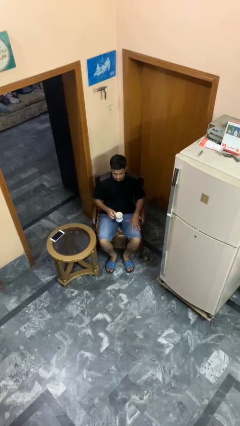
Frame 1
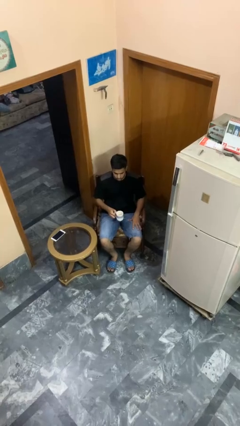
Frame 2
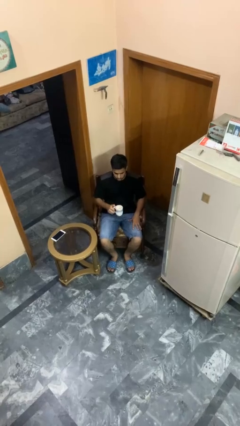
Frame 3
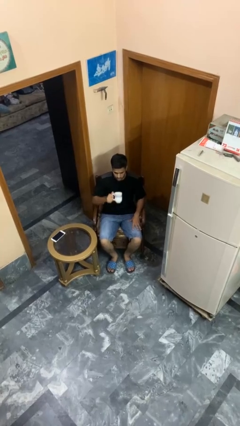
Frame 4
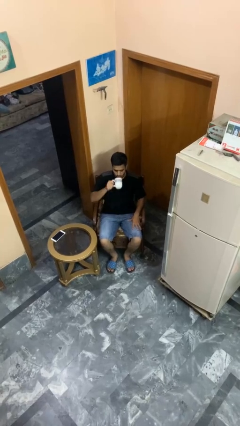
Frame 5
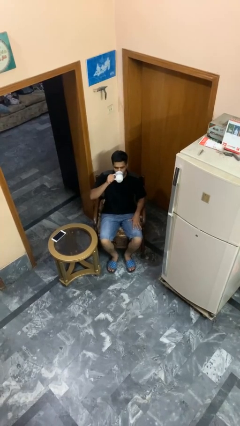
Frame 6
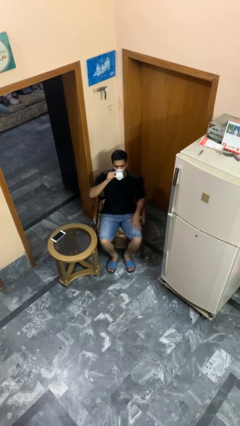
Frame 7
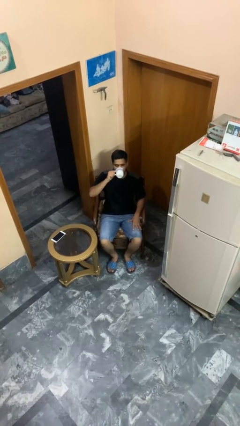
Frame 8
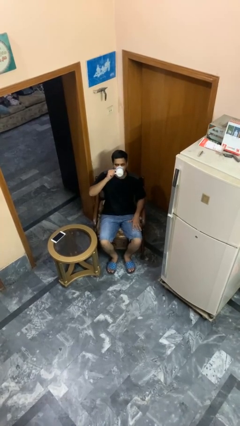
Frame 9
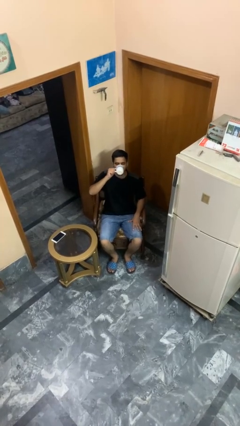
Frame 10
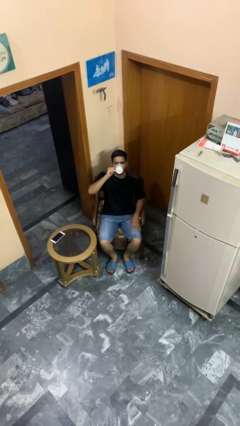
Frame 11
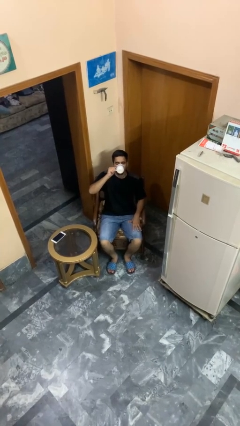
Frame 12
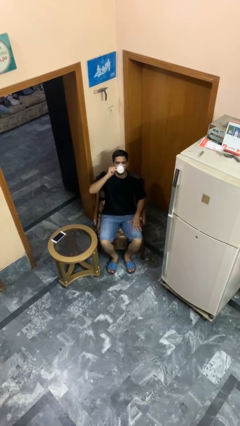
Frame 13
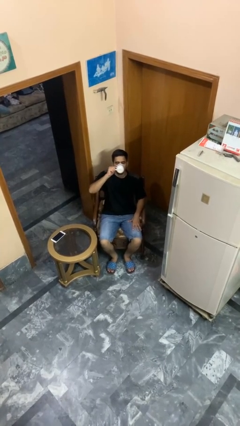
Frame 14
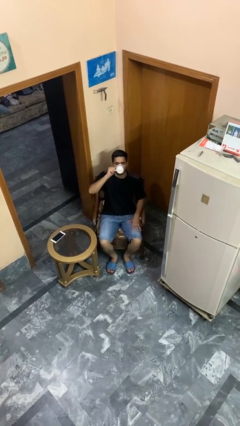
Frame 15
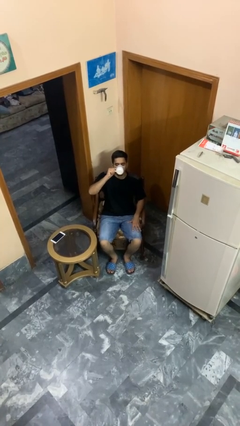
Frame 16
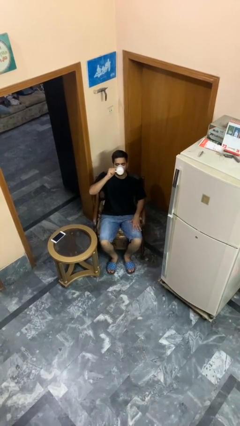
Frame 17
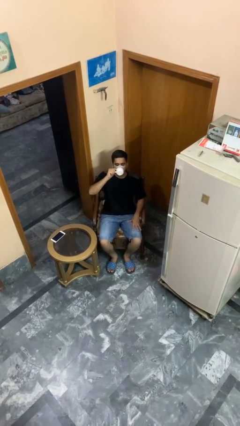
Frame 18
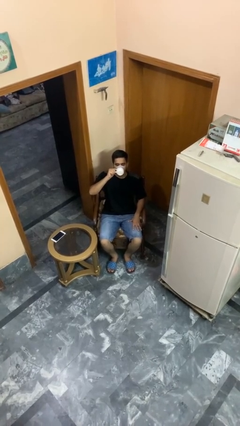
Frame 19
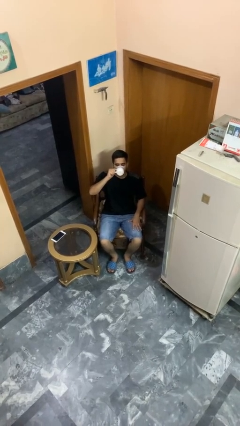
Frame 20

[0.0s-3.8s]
person drinks from mug

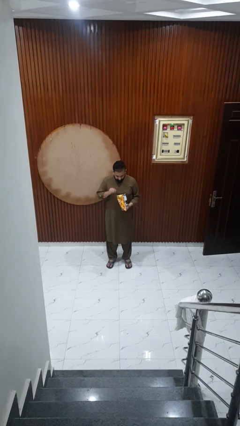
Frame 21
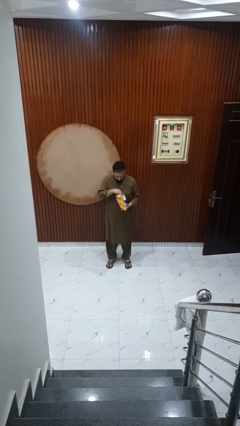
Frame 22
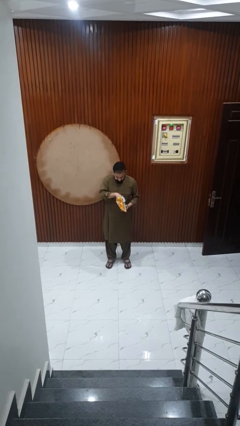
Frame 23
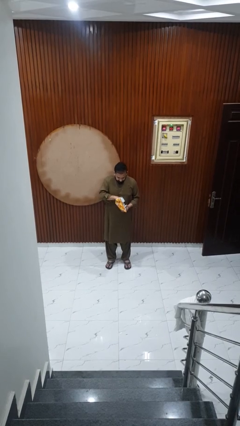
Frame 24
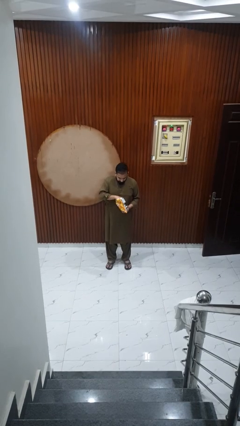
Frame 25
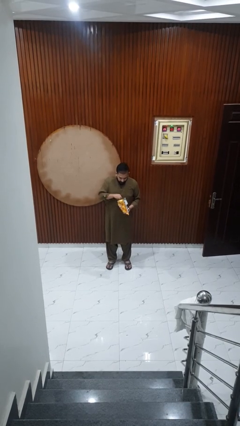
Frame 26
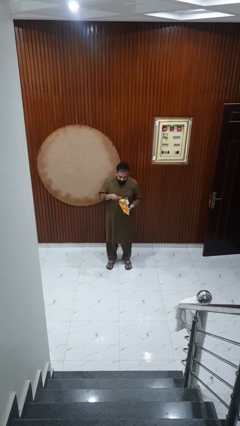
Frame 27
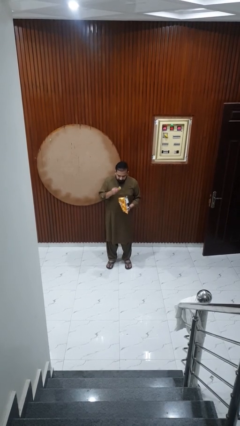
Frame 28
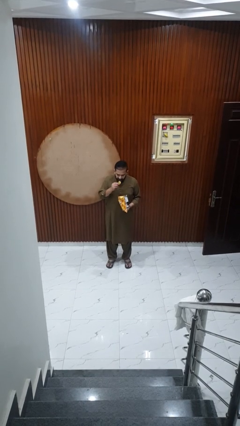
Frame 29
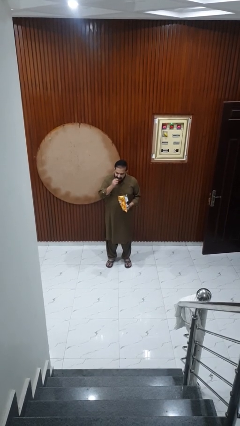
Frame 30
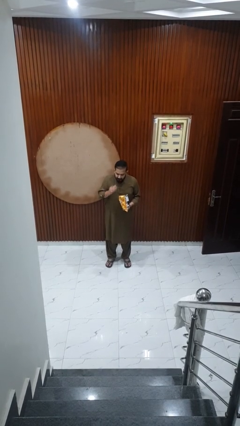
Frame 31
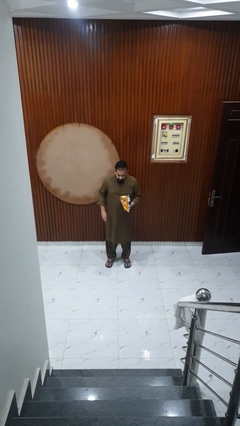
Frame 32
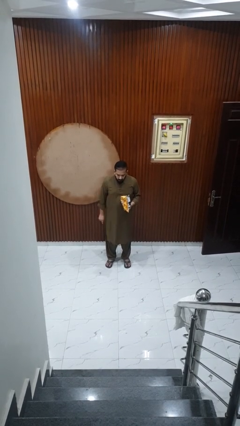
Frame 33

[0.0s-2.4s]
person eats snack from bag

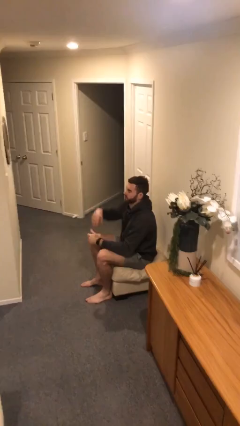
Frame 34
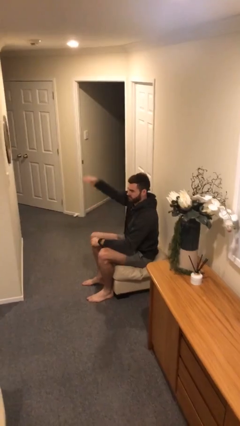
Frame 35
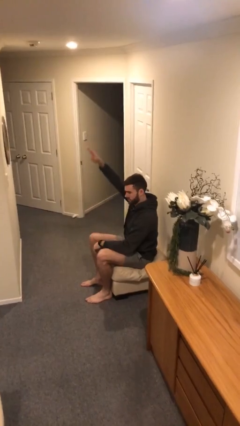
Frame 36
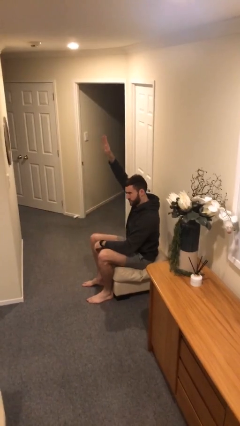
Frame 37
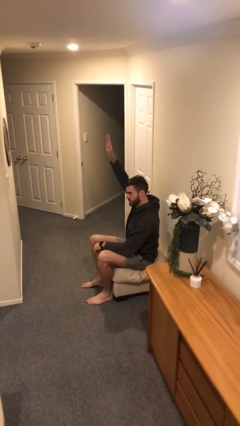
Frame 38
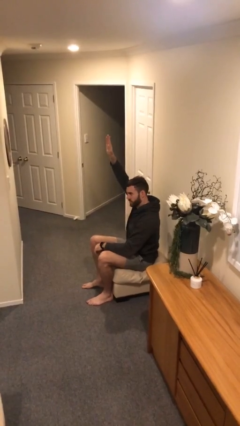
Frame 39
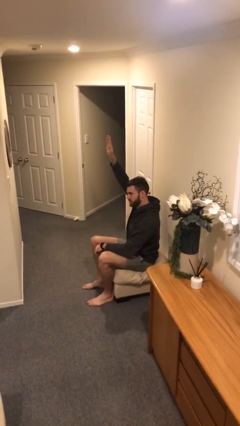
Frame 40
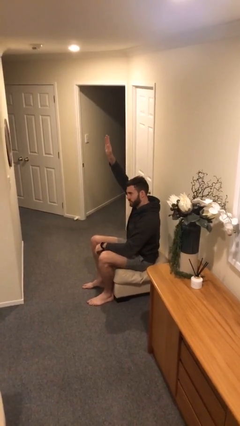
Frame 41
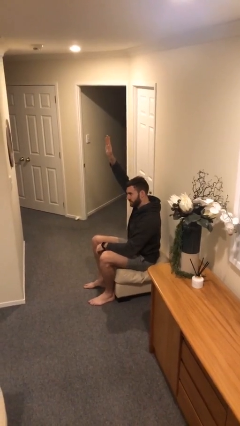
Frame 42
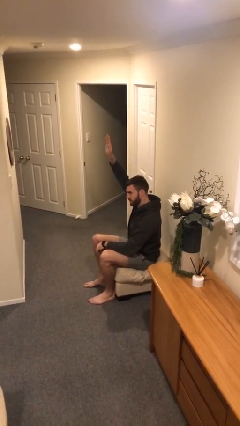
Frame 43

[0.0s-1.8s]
person gestures raise hand

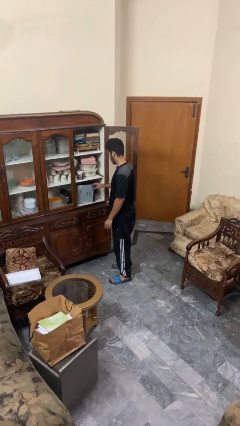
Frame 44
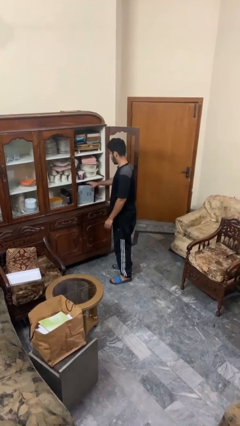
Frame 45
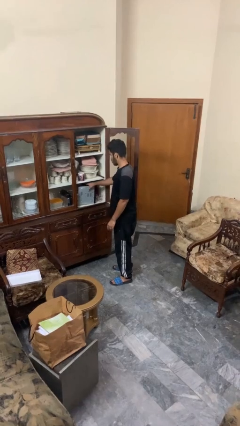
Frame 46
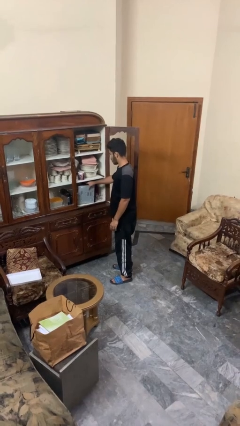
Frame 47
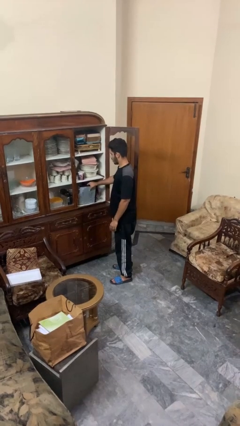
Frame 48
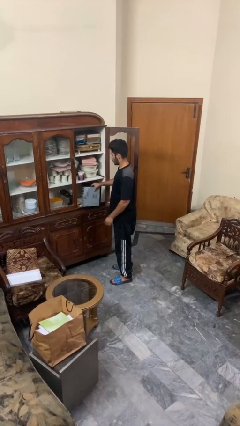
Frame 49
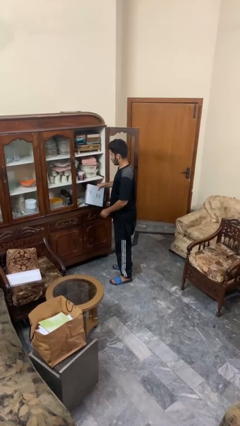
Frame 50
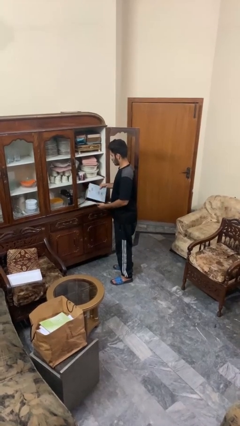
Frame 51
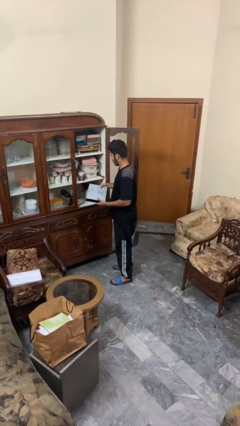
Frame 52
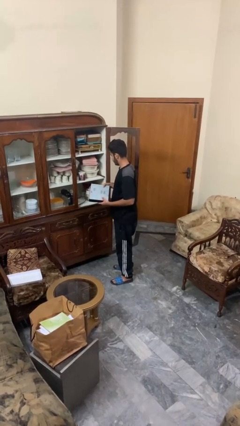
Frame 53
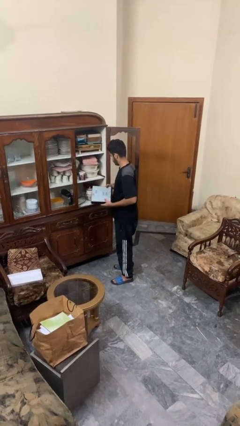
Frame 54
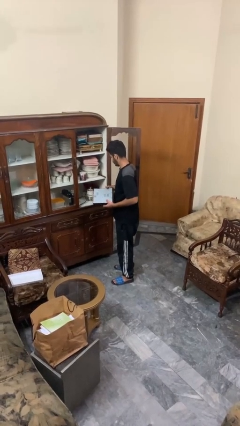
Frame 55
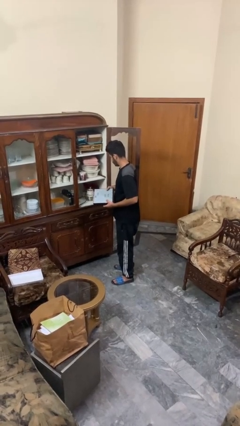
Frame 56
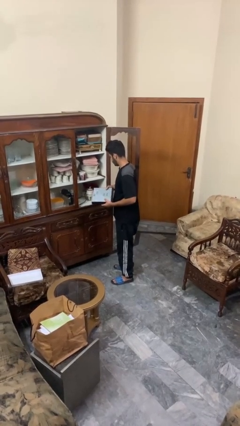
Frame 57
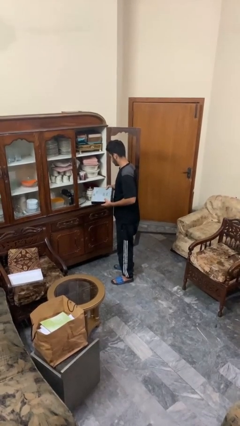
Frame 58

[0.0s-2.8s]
person picks up object from cabinet

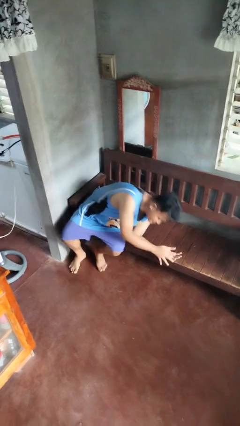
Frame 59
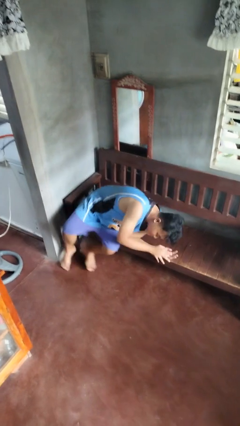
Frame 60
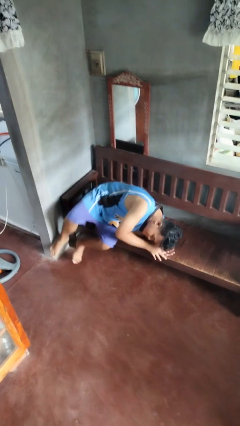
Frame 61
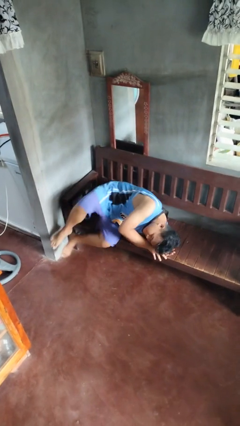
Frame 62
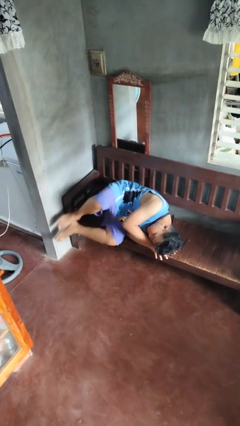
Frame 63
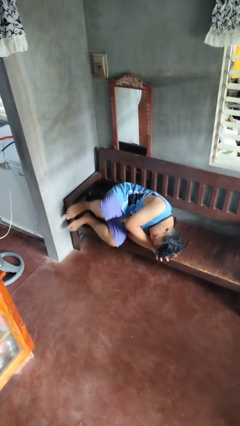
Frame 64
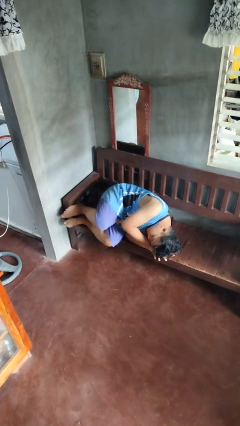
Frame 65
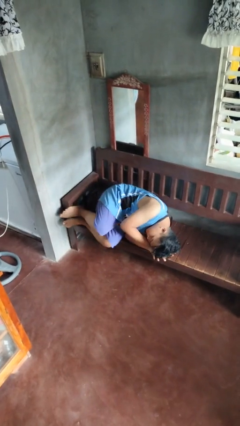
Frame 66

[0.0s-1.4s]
person lies down on couch

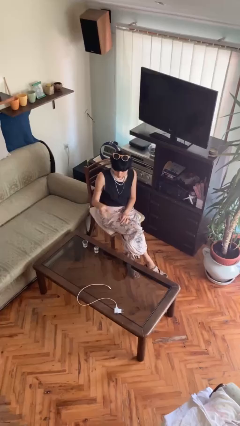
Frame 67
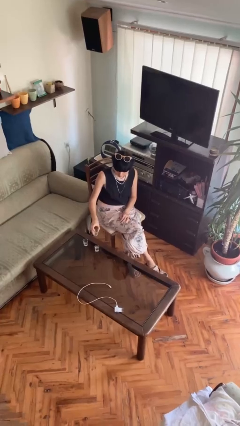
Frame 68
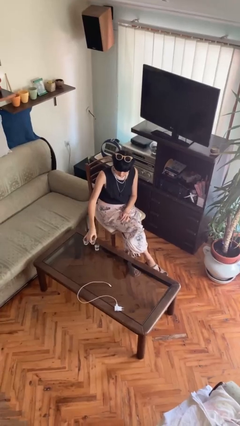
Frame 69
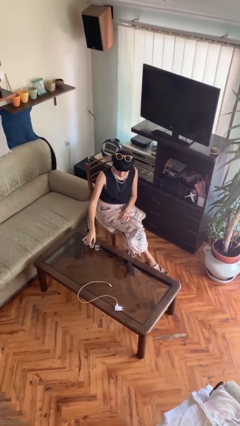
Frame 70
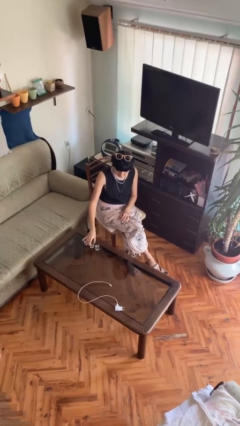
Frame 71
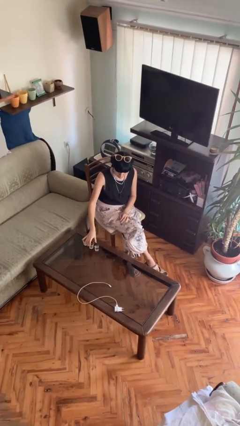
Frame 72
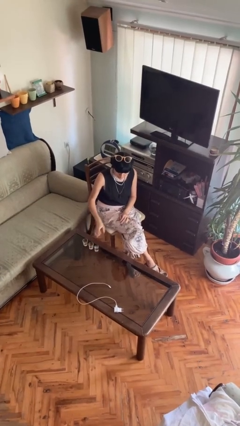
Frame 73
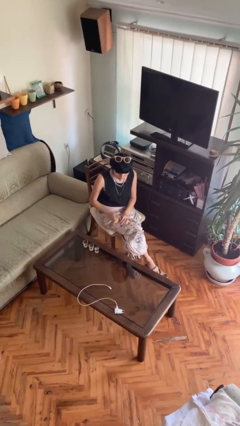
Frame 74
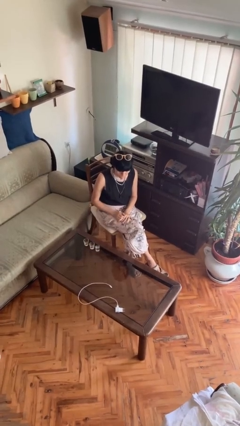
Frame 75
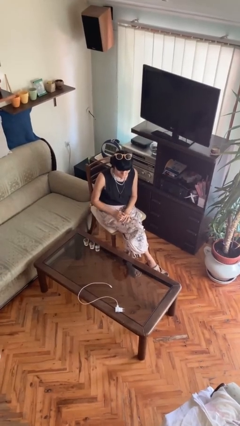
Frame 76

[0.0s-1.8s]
person puts down object on table

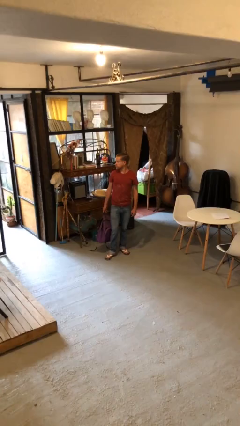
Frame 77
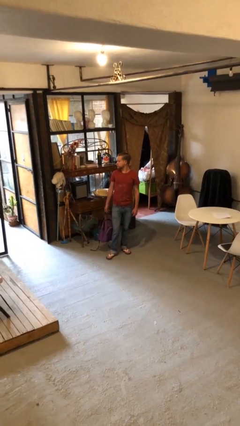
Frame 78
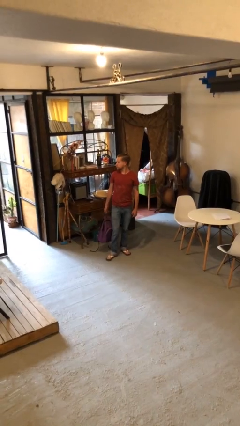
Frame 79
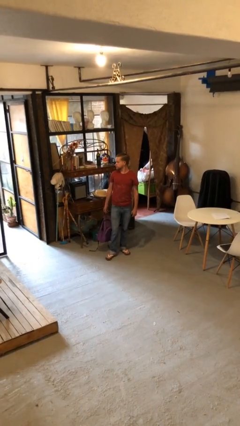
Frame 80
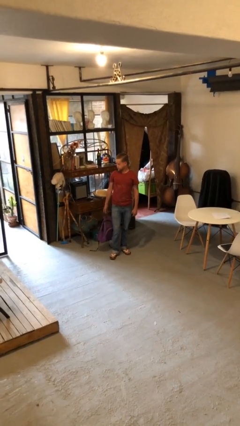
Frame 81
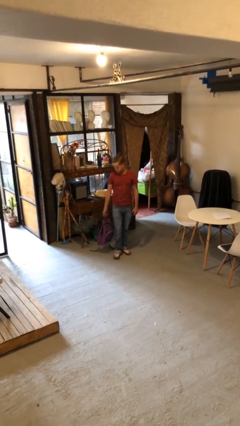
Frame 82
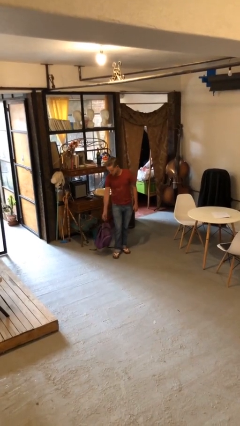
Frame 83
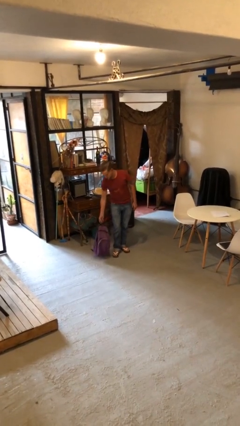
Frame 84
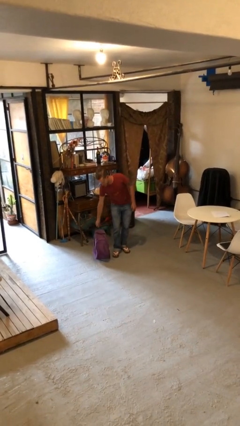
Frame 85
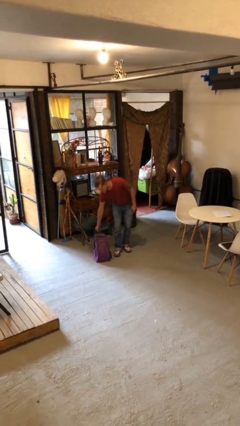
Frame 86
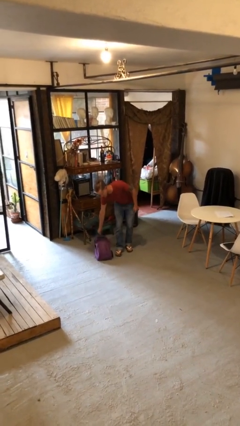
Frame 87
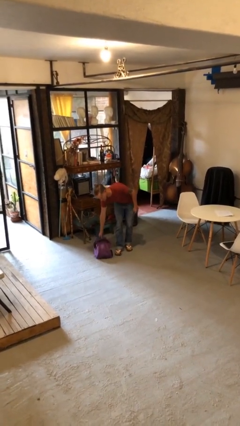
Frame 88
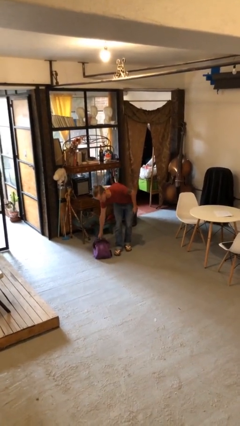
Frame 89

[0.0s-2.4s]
person puts down object on floor

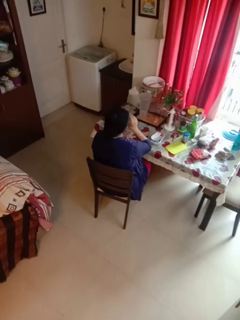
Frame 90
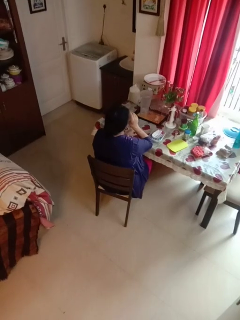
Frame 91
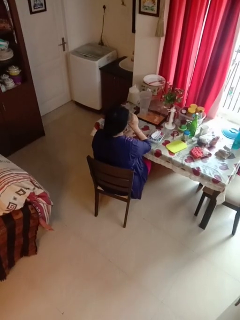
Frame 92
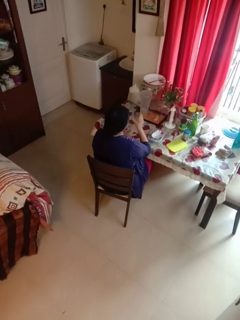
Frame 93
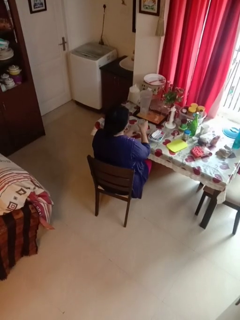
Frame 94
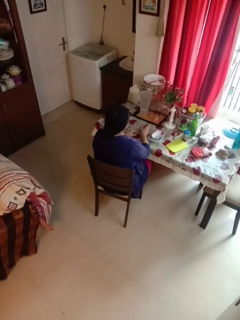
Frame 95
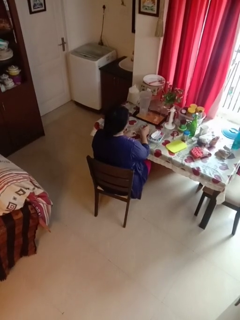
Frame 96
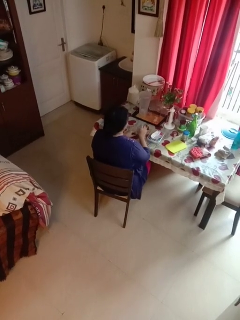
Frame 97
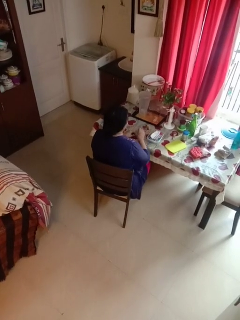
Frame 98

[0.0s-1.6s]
person drinks from cup
